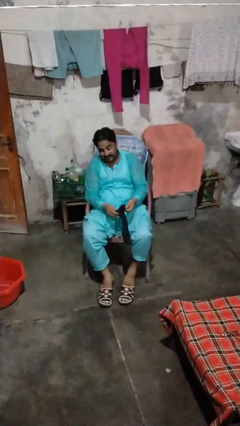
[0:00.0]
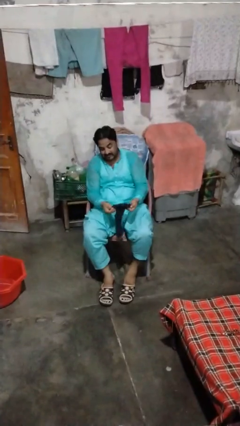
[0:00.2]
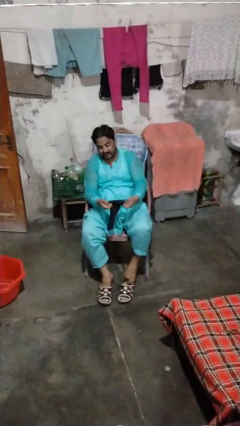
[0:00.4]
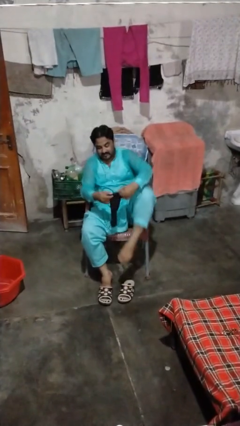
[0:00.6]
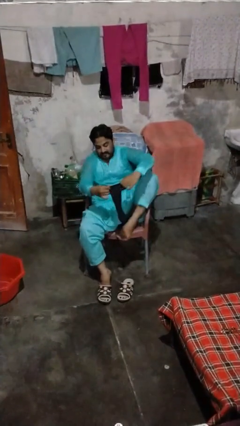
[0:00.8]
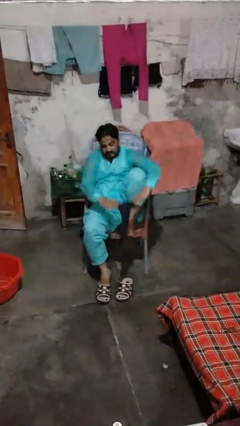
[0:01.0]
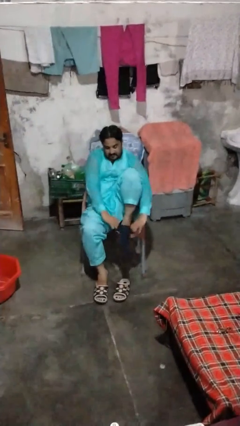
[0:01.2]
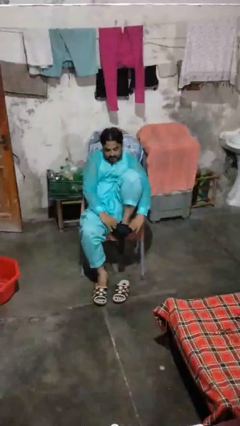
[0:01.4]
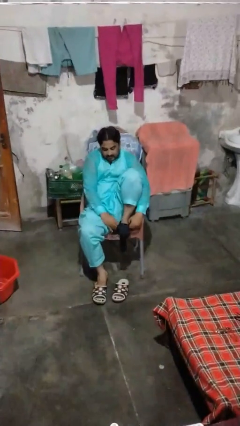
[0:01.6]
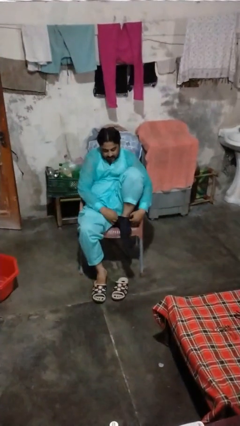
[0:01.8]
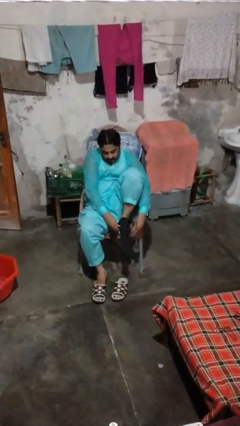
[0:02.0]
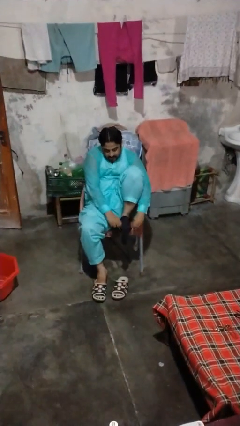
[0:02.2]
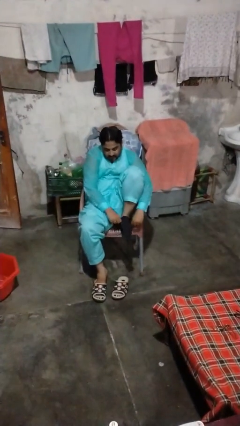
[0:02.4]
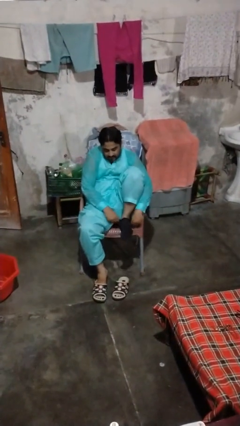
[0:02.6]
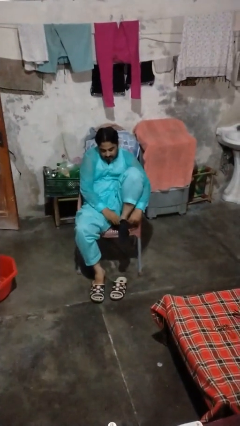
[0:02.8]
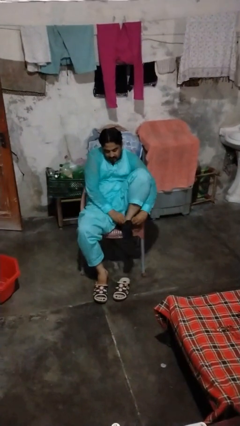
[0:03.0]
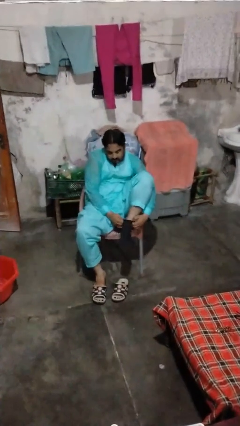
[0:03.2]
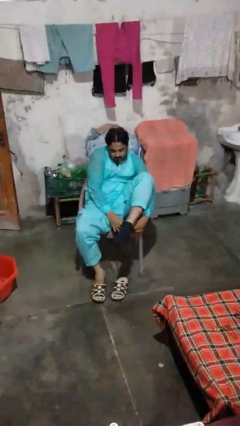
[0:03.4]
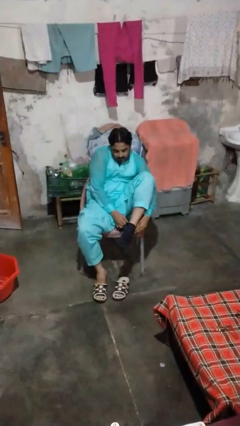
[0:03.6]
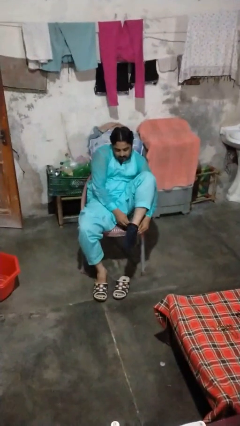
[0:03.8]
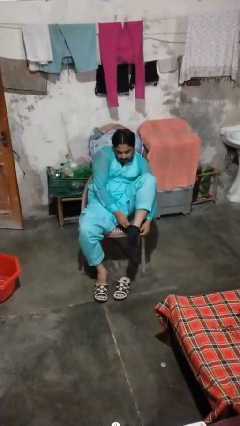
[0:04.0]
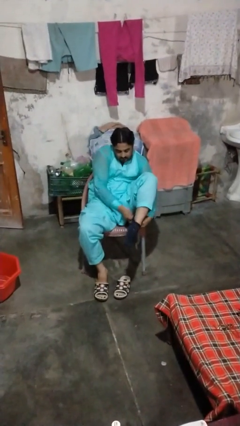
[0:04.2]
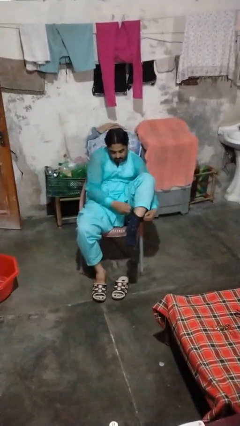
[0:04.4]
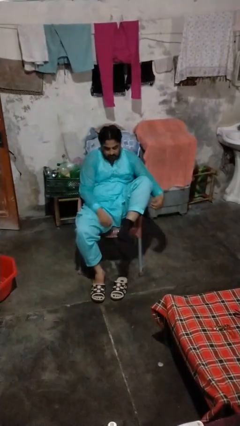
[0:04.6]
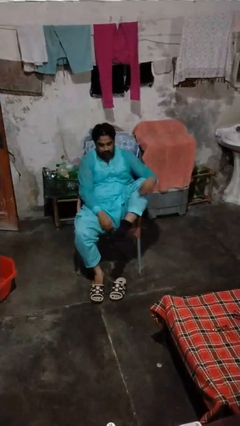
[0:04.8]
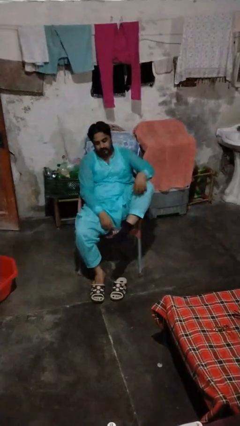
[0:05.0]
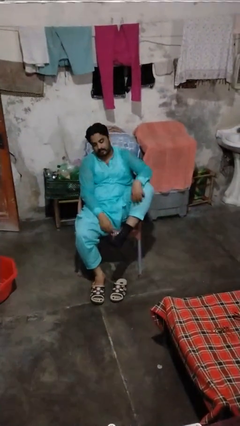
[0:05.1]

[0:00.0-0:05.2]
person puts on socks

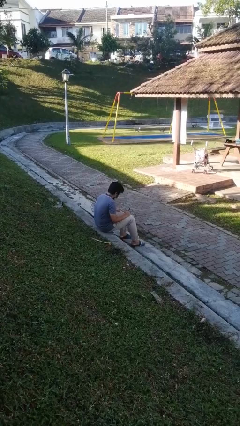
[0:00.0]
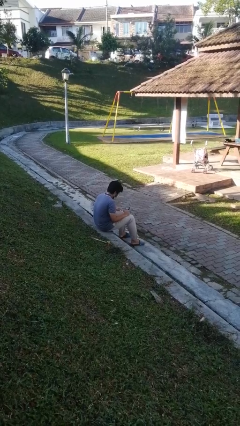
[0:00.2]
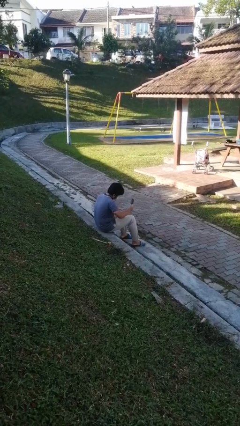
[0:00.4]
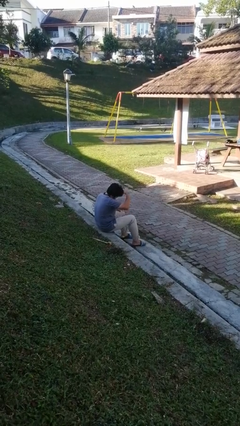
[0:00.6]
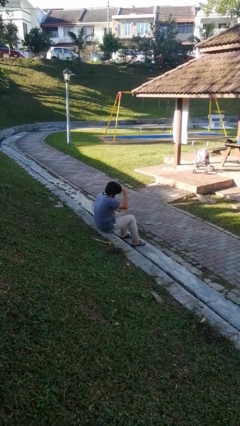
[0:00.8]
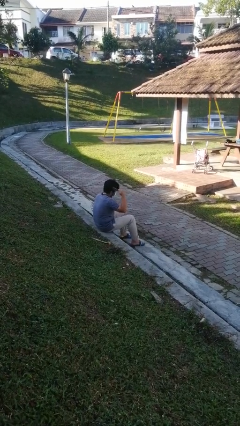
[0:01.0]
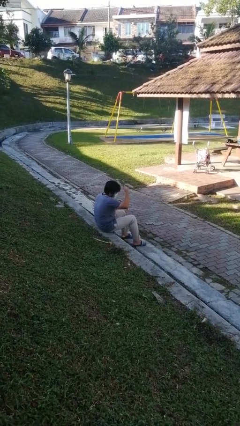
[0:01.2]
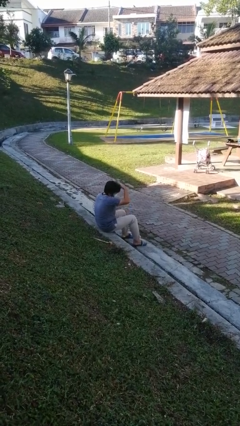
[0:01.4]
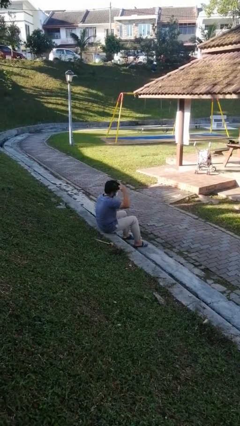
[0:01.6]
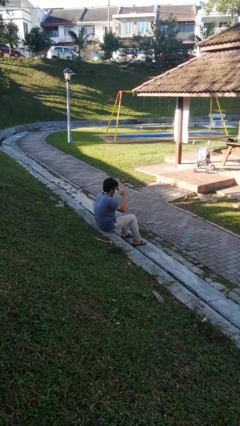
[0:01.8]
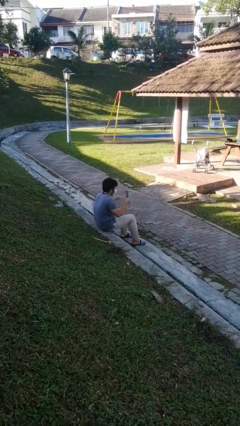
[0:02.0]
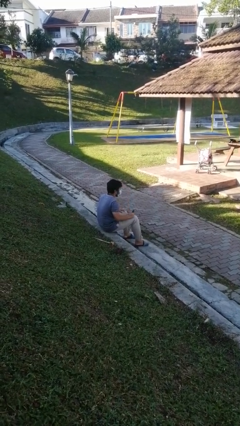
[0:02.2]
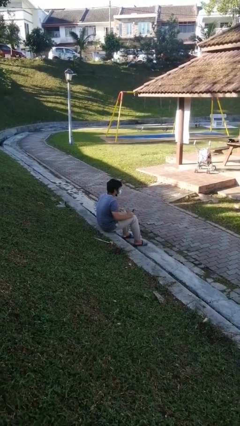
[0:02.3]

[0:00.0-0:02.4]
person brushes hair

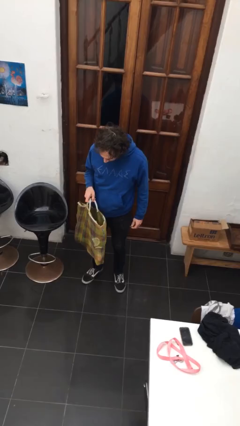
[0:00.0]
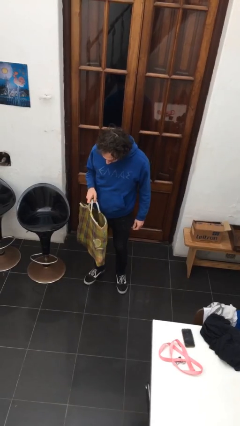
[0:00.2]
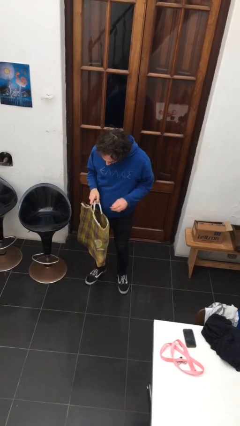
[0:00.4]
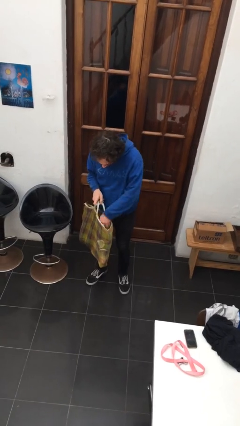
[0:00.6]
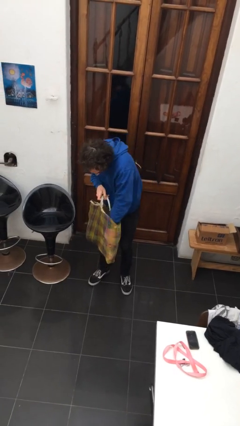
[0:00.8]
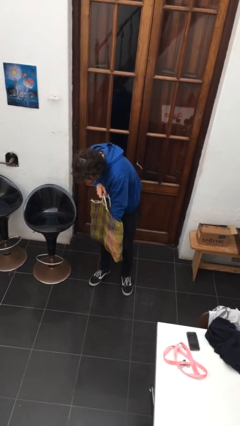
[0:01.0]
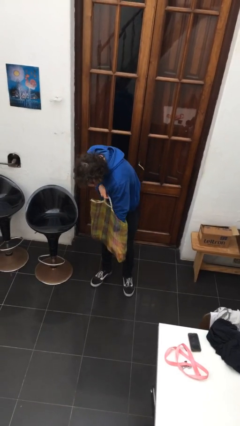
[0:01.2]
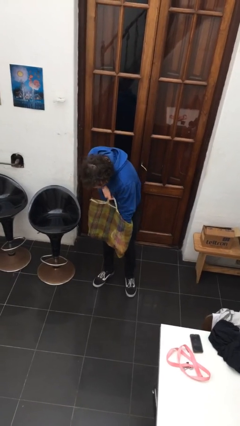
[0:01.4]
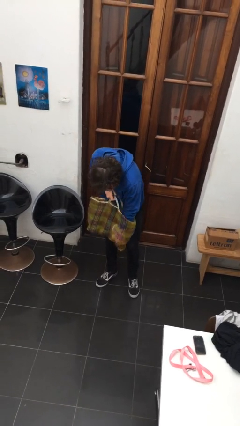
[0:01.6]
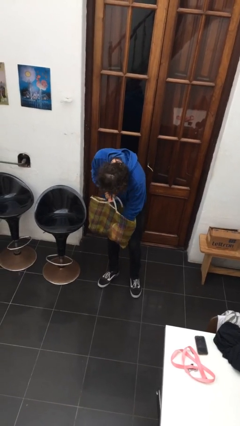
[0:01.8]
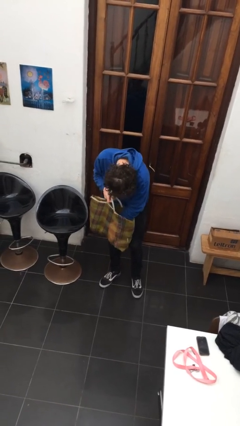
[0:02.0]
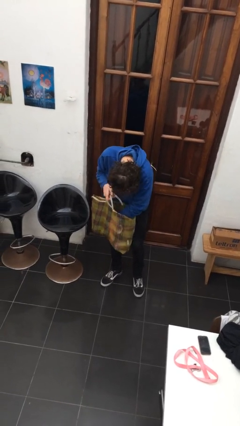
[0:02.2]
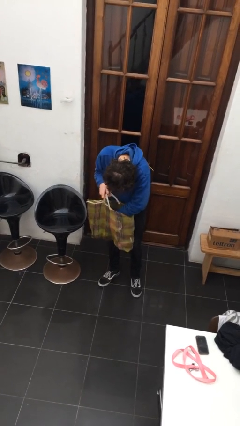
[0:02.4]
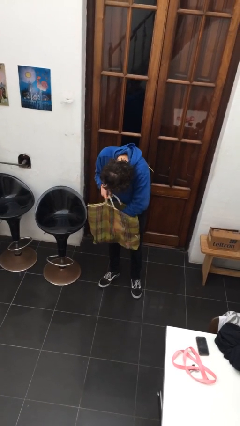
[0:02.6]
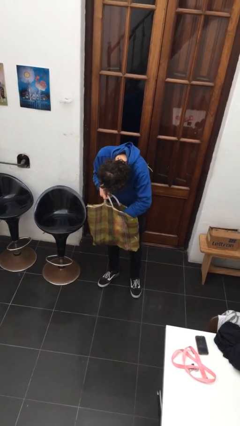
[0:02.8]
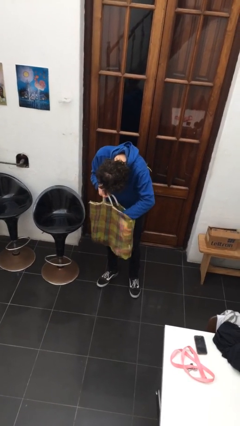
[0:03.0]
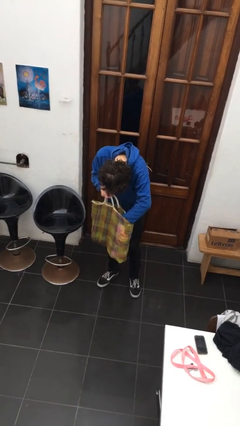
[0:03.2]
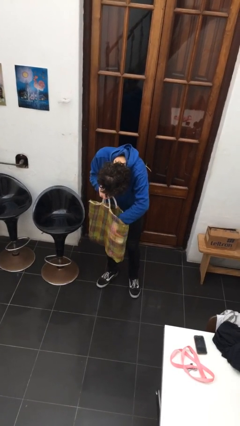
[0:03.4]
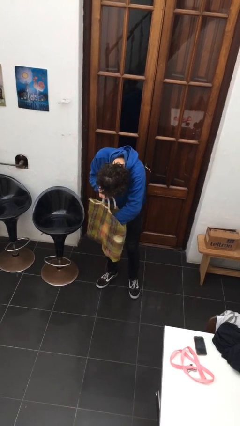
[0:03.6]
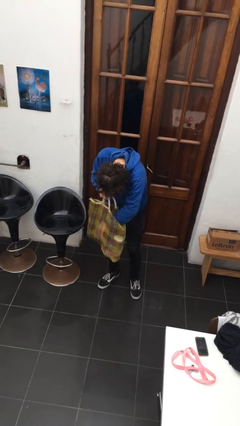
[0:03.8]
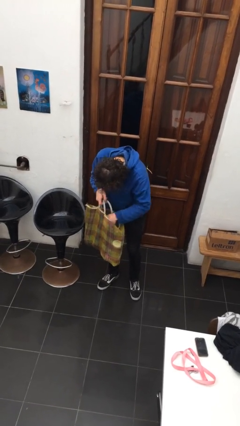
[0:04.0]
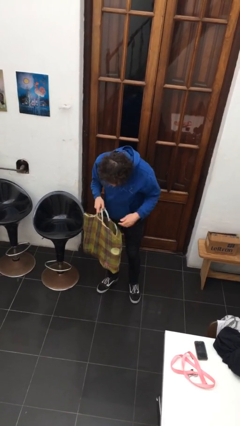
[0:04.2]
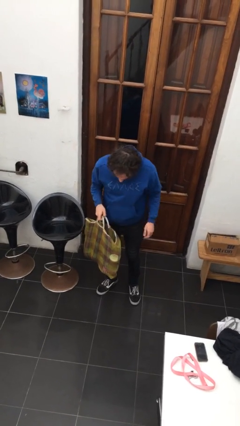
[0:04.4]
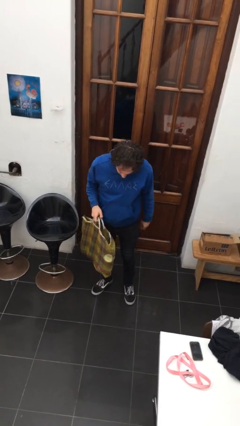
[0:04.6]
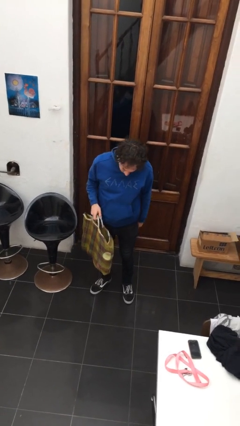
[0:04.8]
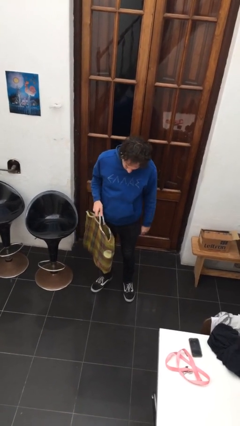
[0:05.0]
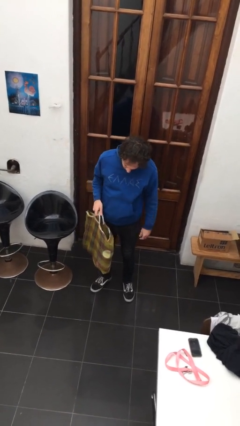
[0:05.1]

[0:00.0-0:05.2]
person searches in bag

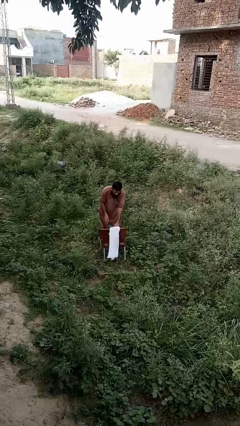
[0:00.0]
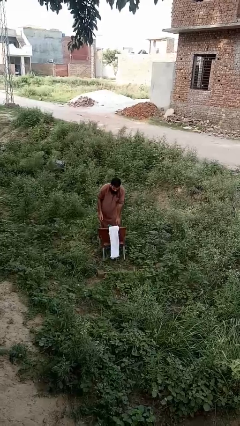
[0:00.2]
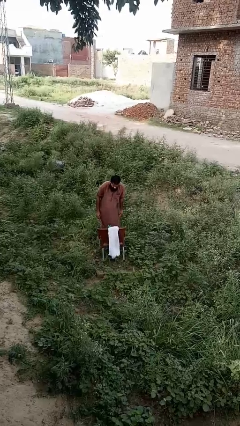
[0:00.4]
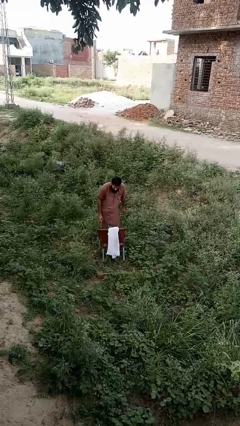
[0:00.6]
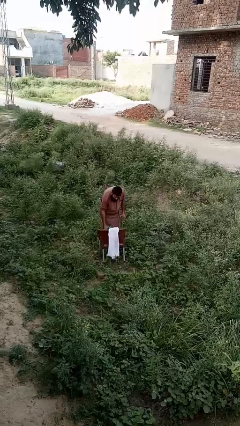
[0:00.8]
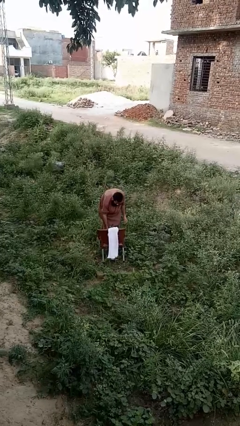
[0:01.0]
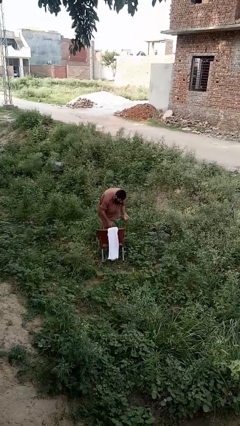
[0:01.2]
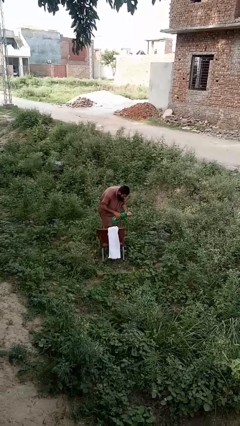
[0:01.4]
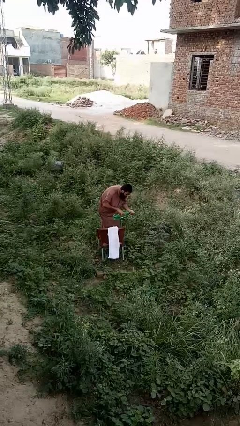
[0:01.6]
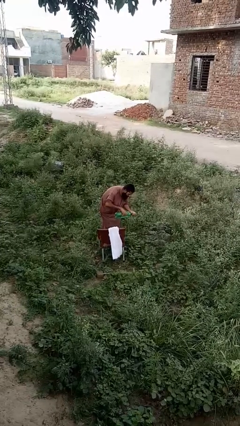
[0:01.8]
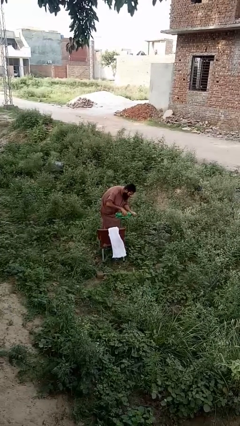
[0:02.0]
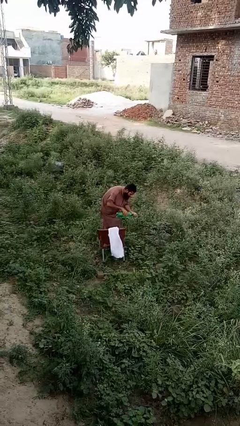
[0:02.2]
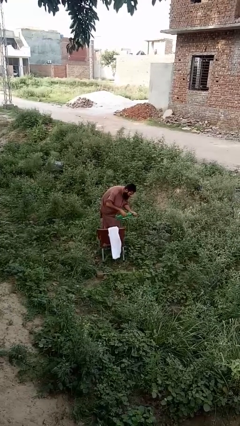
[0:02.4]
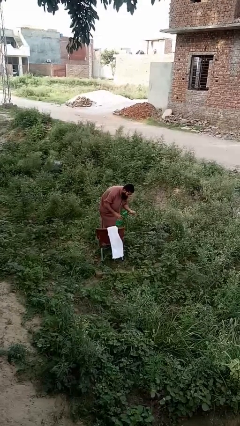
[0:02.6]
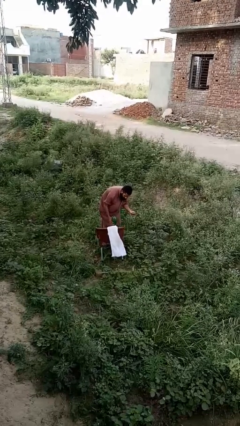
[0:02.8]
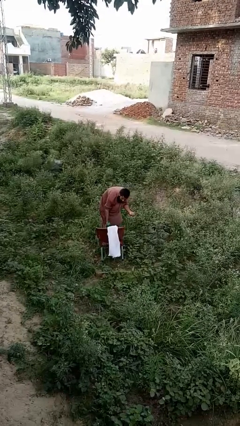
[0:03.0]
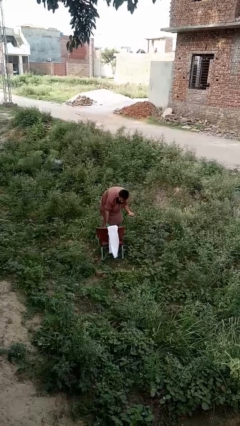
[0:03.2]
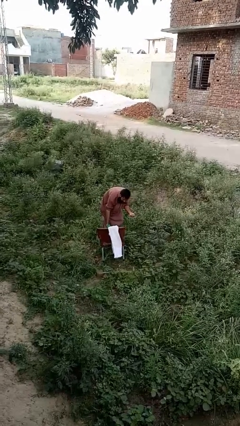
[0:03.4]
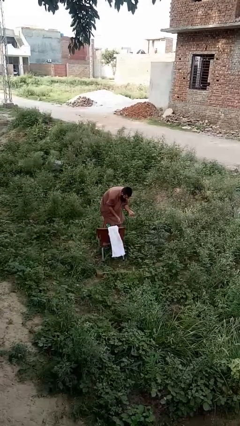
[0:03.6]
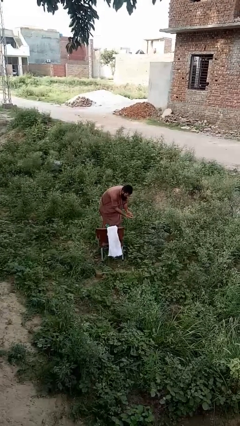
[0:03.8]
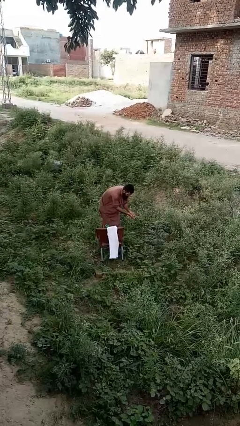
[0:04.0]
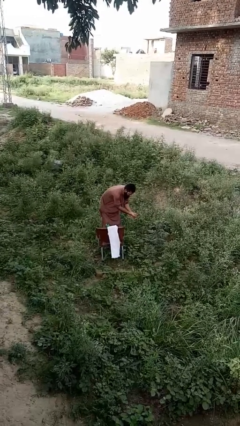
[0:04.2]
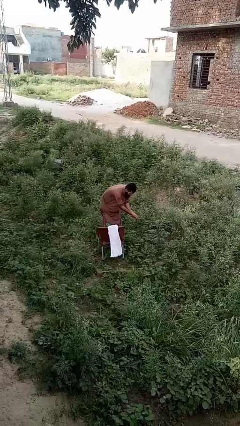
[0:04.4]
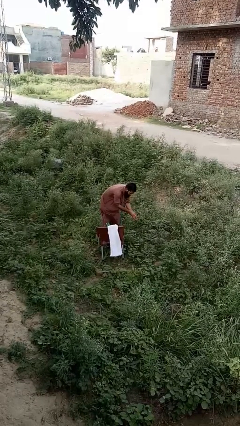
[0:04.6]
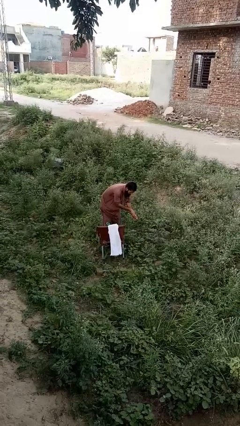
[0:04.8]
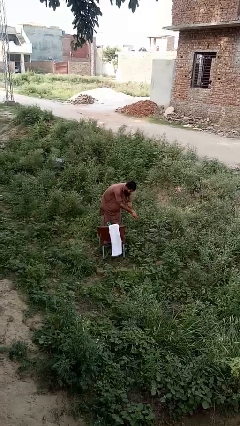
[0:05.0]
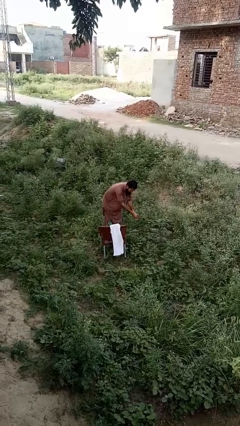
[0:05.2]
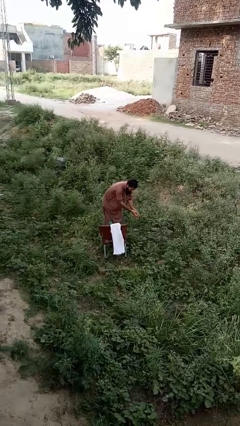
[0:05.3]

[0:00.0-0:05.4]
person washes hands
